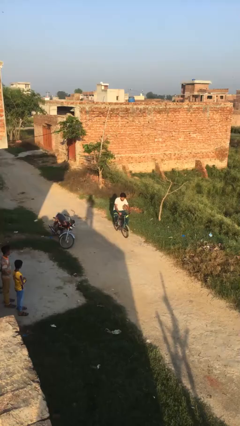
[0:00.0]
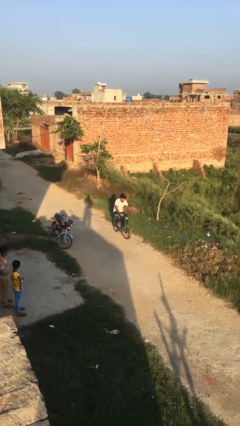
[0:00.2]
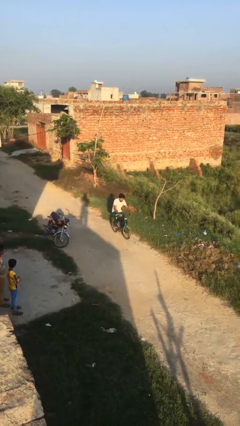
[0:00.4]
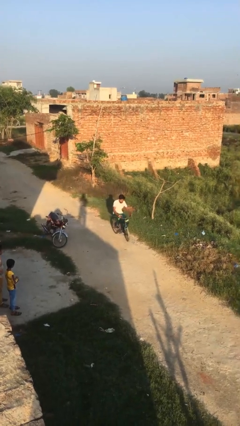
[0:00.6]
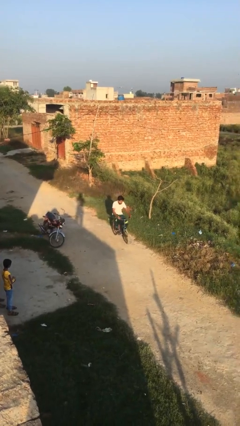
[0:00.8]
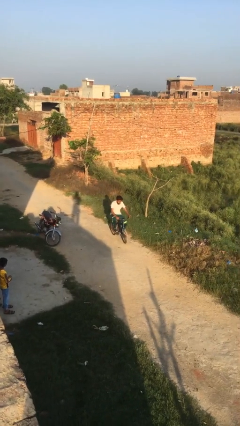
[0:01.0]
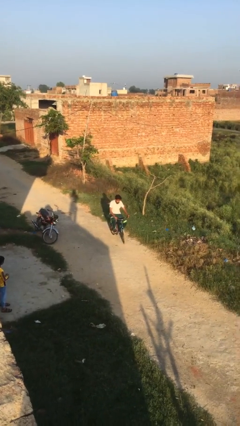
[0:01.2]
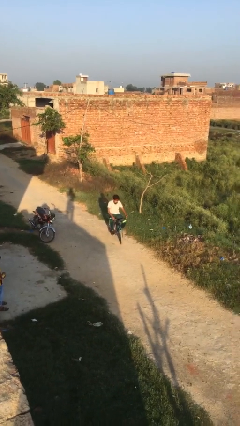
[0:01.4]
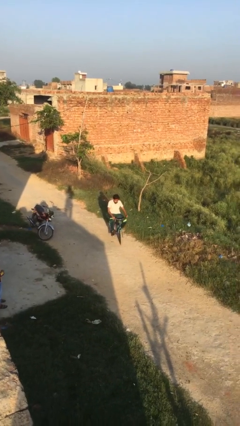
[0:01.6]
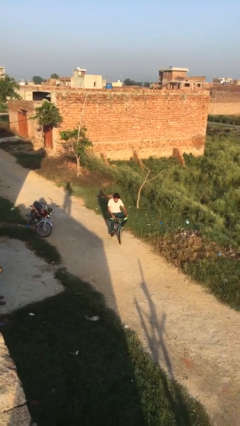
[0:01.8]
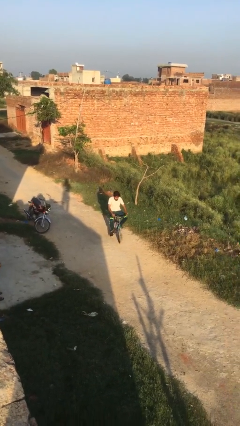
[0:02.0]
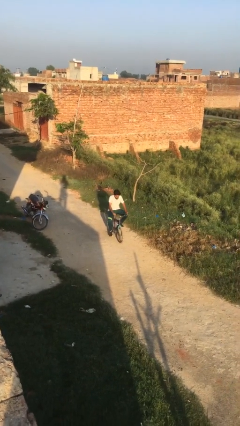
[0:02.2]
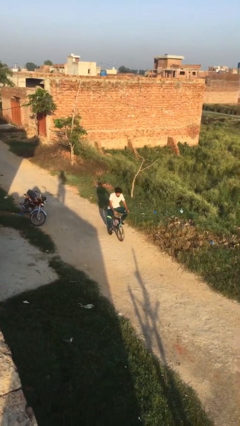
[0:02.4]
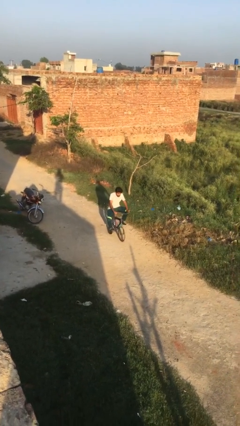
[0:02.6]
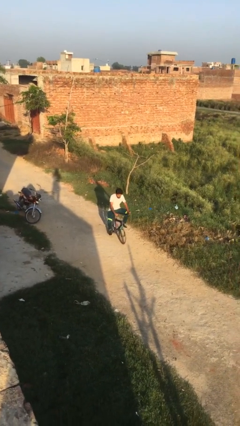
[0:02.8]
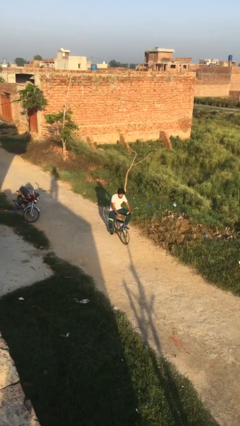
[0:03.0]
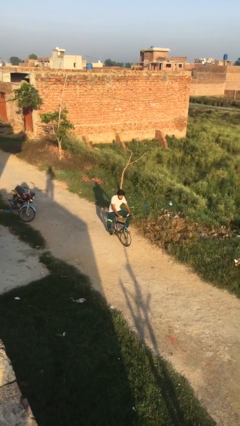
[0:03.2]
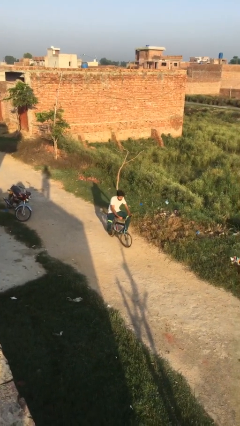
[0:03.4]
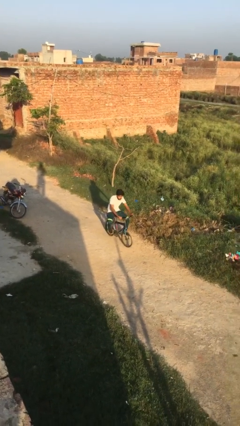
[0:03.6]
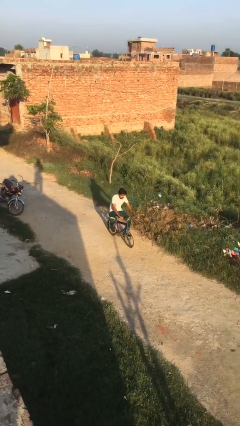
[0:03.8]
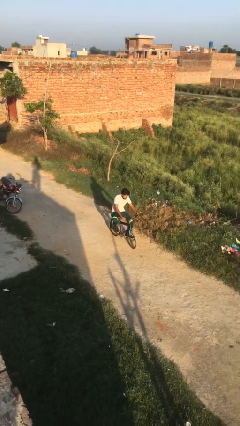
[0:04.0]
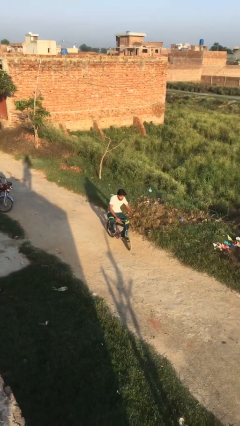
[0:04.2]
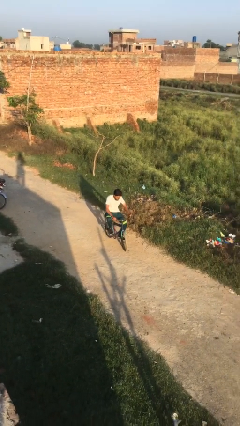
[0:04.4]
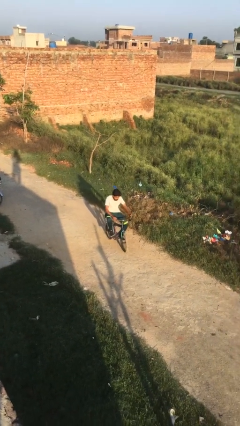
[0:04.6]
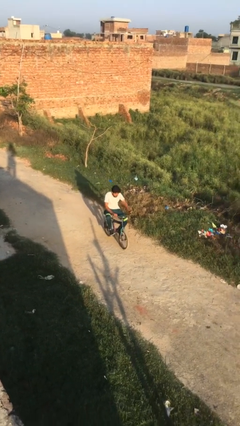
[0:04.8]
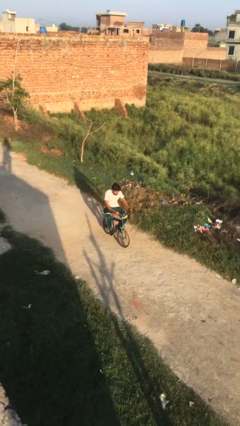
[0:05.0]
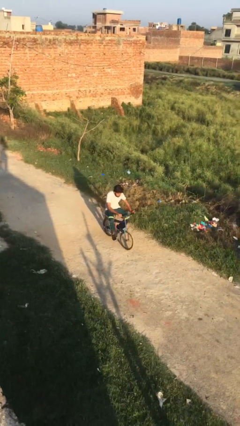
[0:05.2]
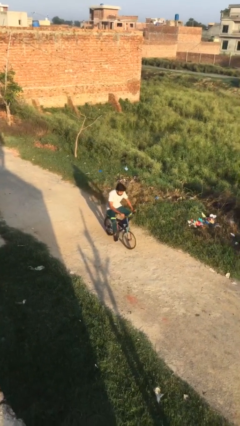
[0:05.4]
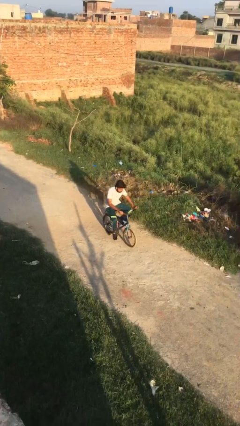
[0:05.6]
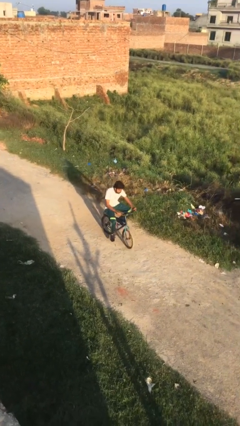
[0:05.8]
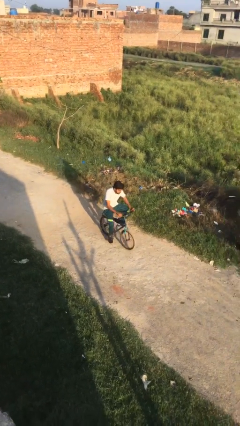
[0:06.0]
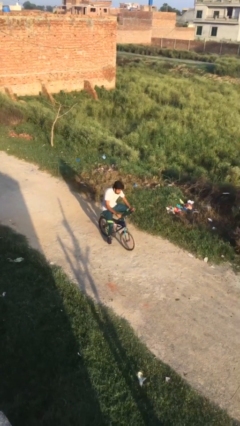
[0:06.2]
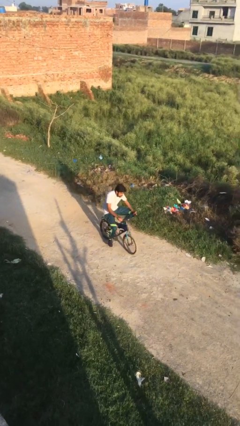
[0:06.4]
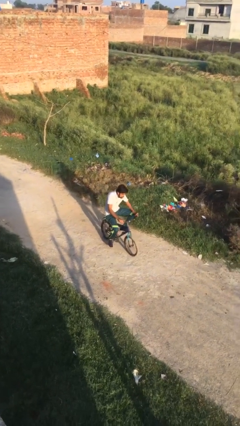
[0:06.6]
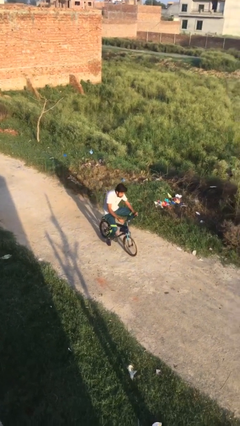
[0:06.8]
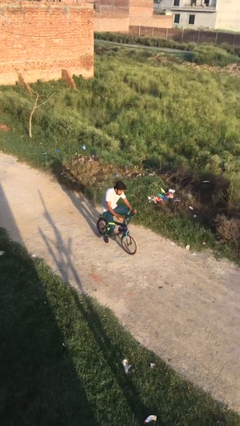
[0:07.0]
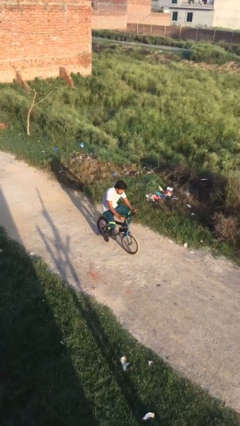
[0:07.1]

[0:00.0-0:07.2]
person rides bicycle

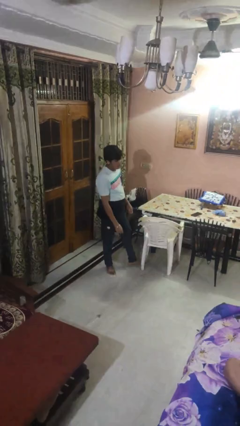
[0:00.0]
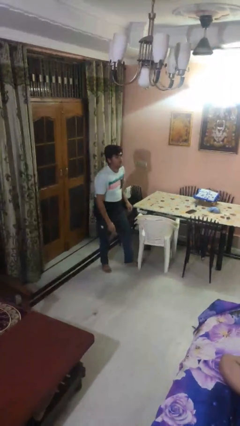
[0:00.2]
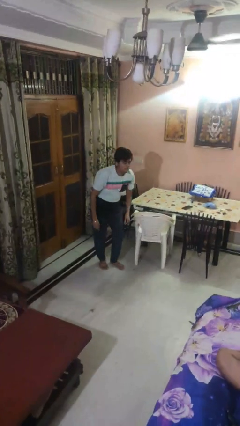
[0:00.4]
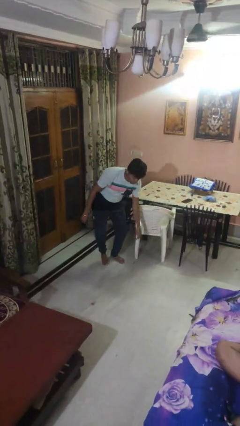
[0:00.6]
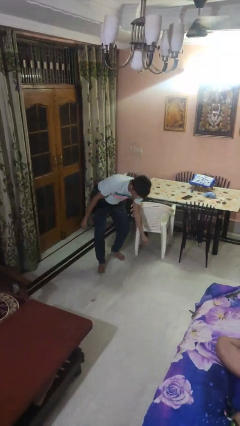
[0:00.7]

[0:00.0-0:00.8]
person trips on object on floor

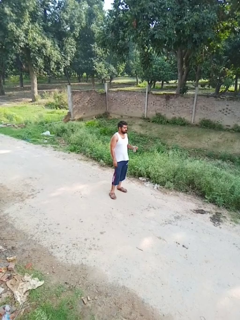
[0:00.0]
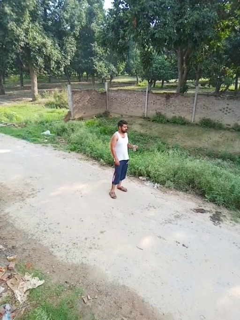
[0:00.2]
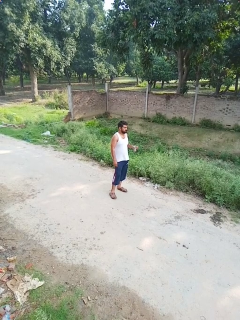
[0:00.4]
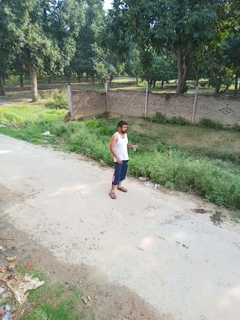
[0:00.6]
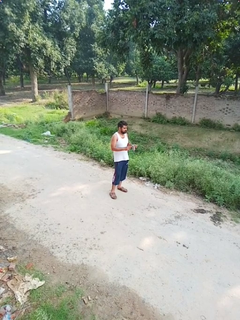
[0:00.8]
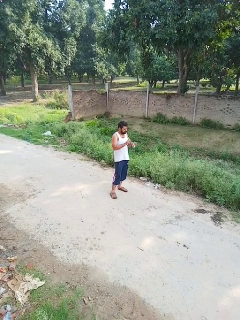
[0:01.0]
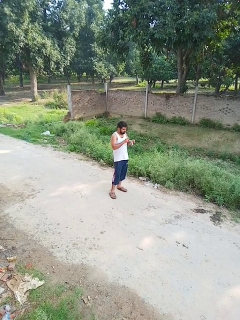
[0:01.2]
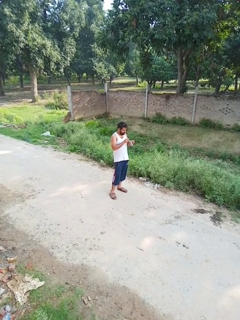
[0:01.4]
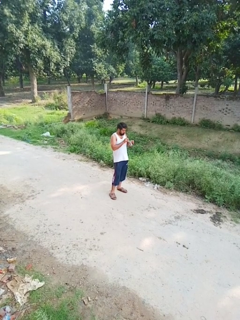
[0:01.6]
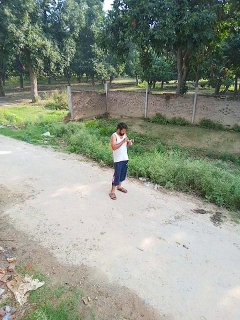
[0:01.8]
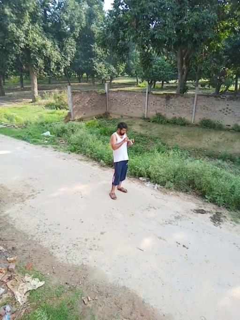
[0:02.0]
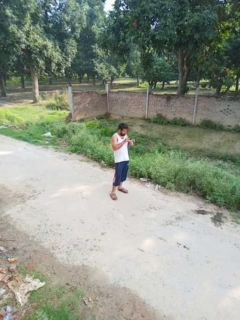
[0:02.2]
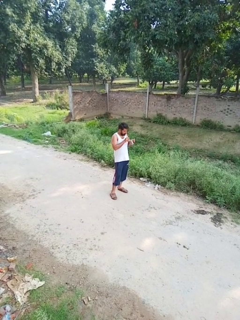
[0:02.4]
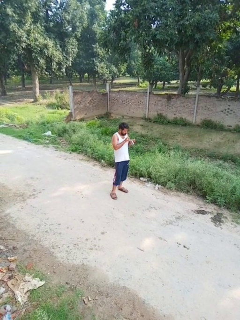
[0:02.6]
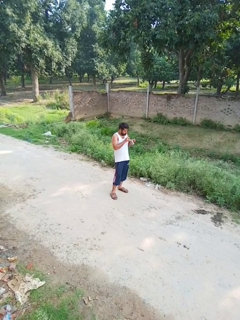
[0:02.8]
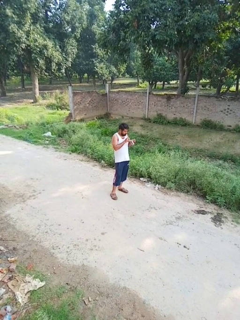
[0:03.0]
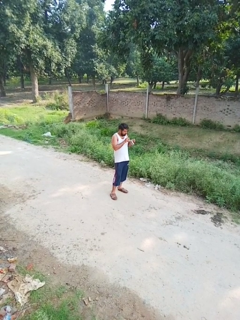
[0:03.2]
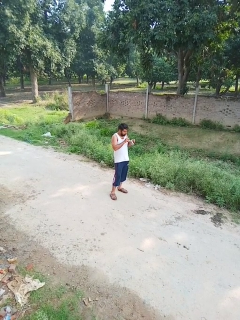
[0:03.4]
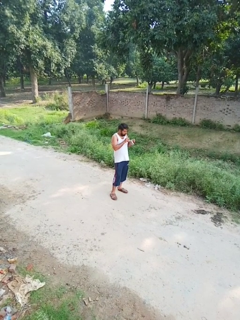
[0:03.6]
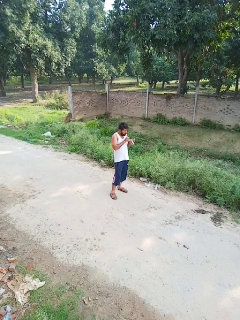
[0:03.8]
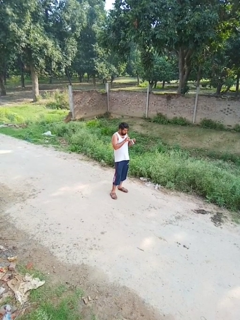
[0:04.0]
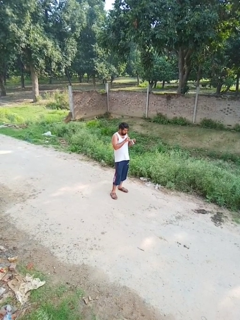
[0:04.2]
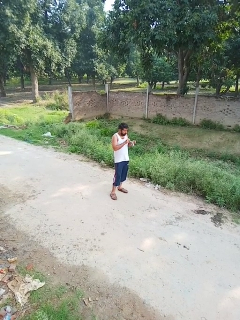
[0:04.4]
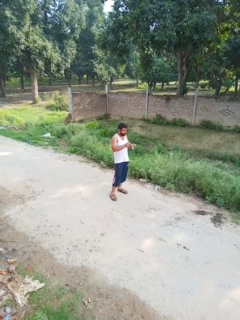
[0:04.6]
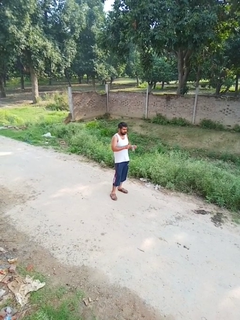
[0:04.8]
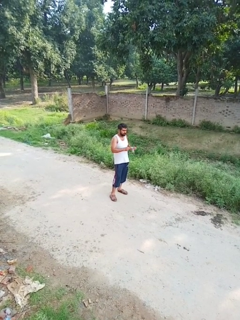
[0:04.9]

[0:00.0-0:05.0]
person drinks from straw

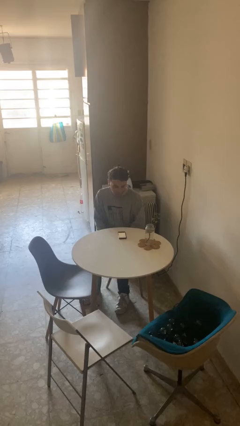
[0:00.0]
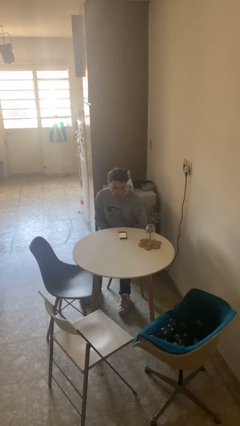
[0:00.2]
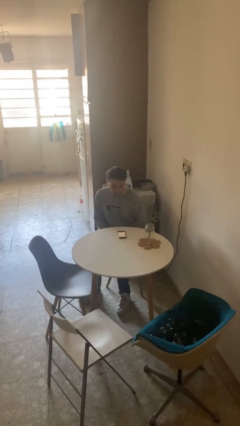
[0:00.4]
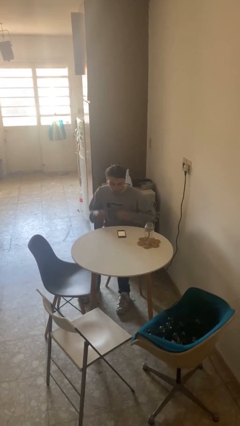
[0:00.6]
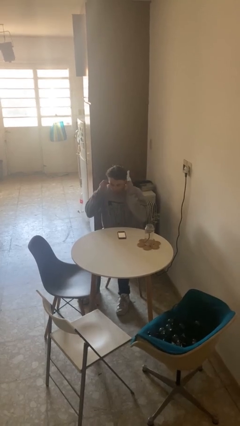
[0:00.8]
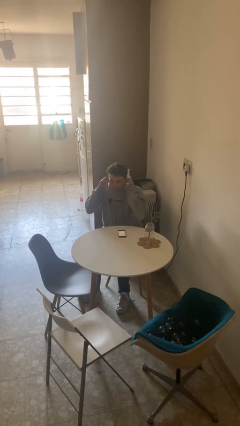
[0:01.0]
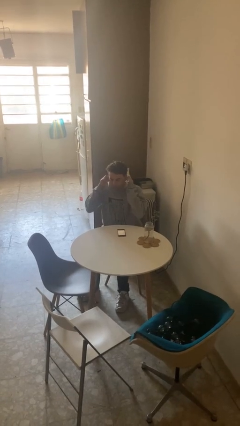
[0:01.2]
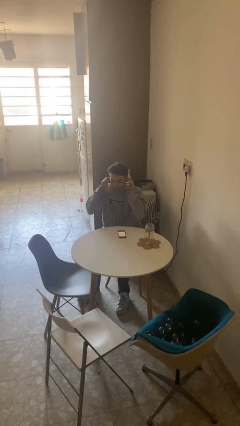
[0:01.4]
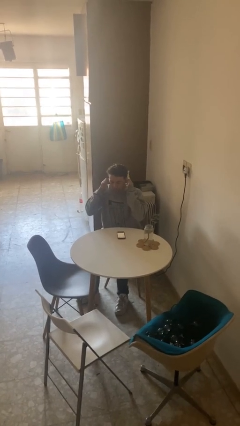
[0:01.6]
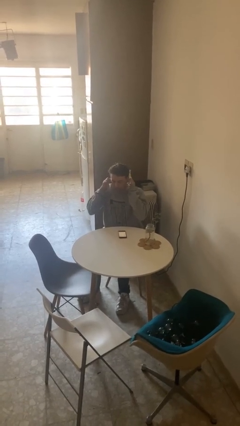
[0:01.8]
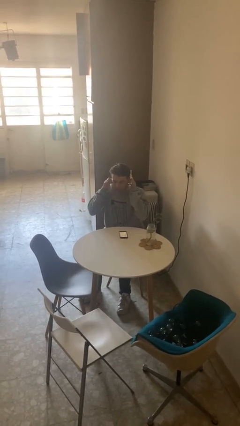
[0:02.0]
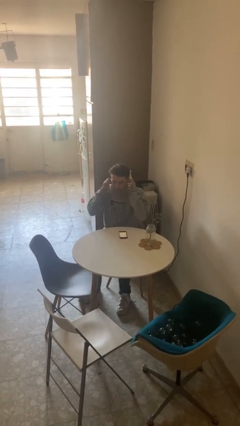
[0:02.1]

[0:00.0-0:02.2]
person puts fingers in ear

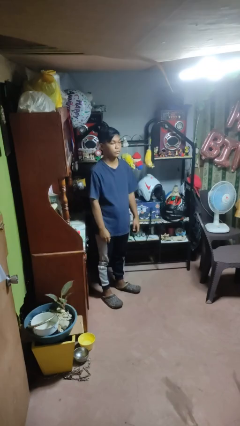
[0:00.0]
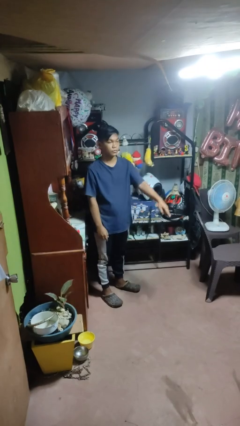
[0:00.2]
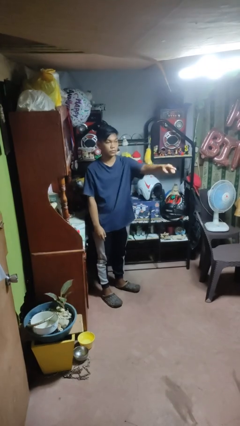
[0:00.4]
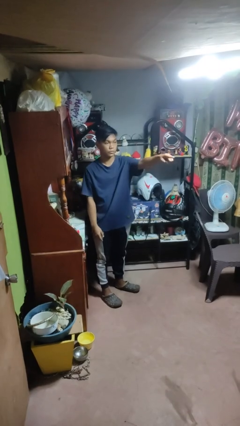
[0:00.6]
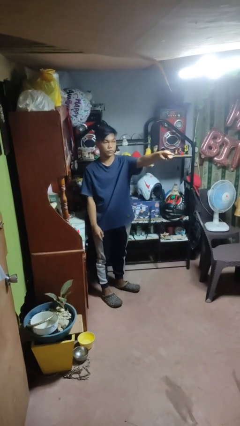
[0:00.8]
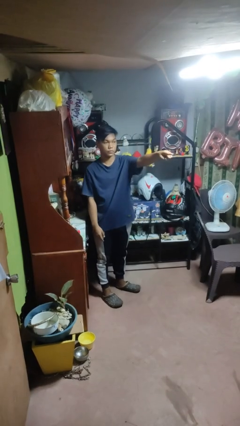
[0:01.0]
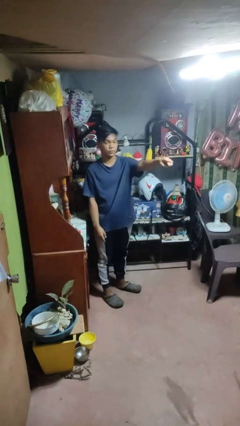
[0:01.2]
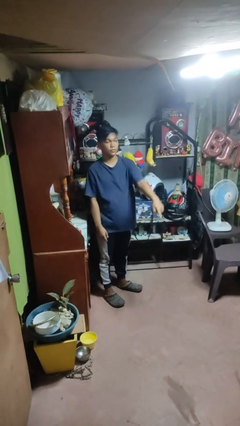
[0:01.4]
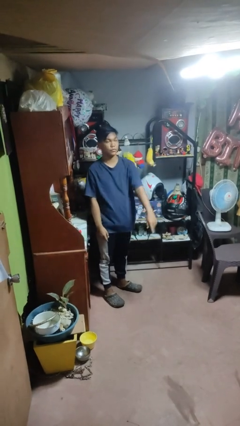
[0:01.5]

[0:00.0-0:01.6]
person points at person

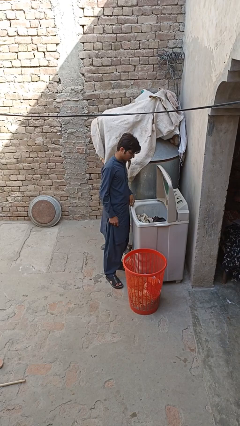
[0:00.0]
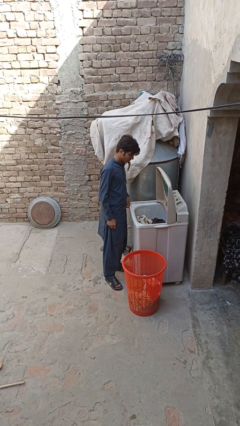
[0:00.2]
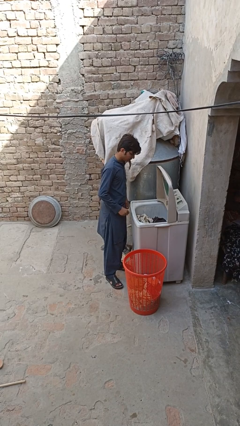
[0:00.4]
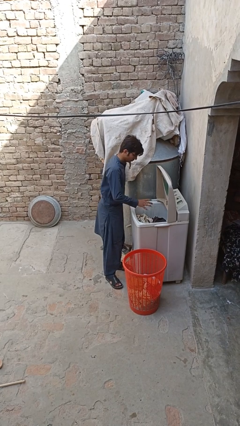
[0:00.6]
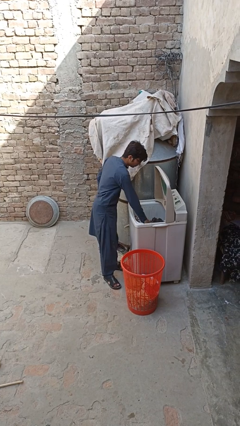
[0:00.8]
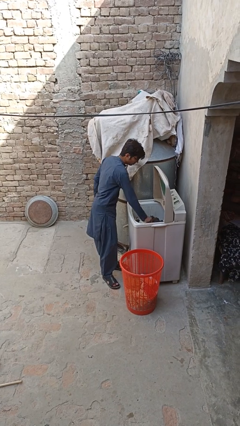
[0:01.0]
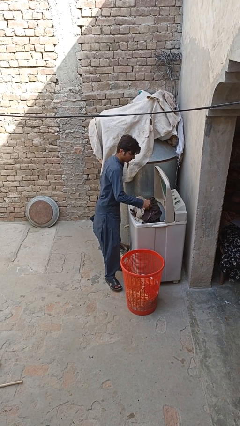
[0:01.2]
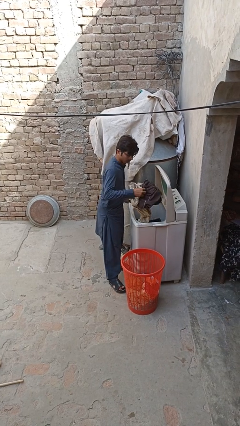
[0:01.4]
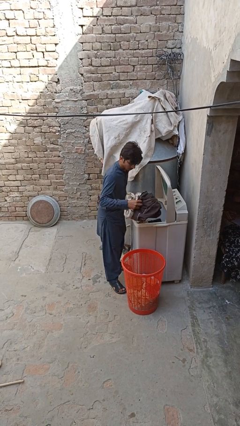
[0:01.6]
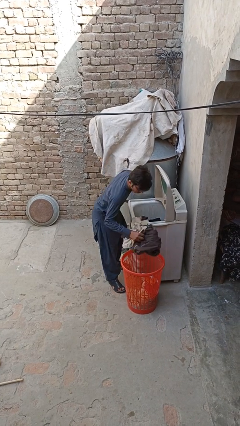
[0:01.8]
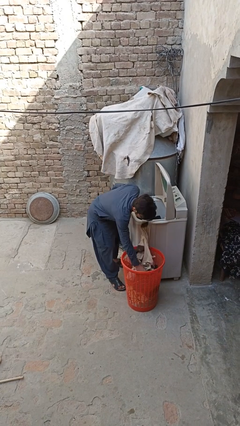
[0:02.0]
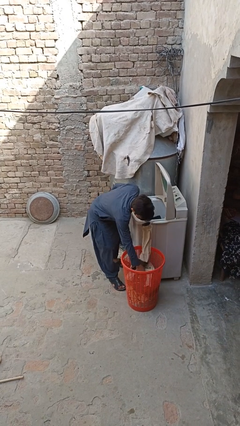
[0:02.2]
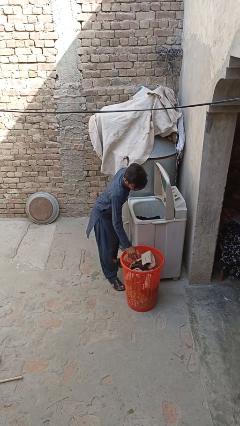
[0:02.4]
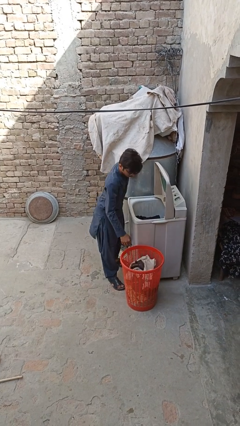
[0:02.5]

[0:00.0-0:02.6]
person unloads clotheswasher
